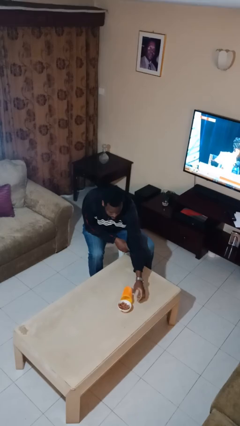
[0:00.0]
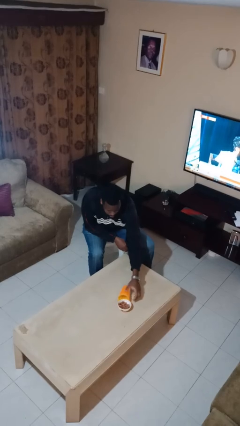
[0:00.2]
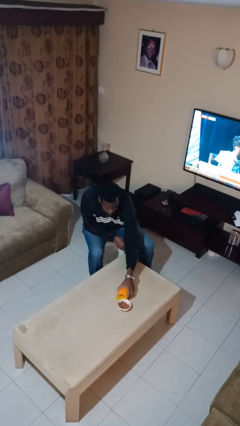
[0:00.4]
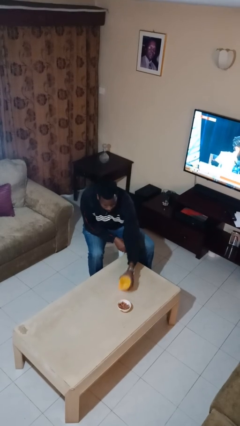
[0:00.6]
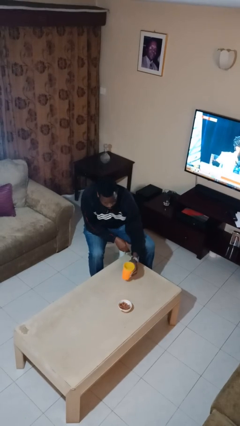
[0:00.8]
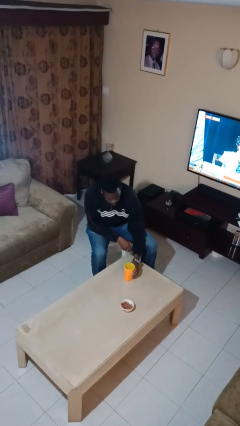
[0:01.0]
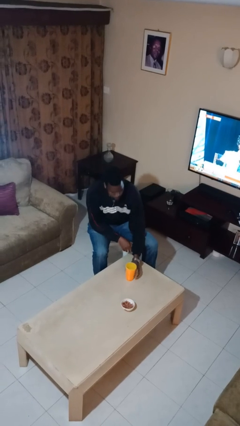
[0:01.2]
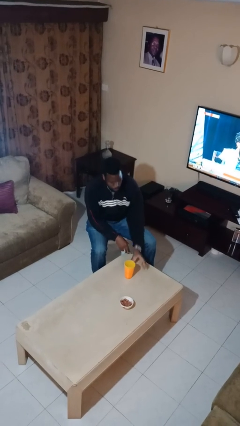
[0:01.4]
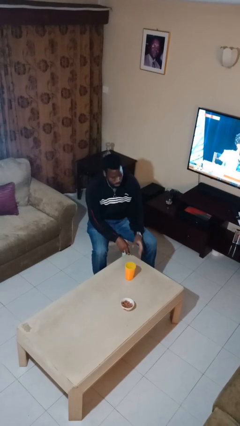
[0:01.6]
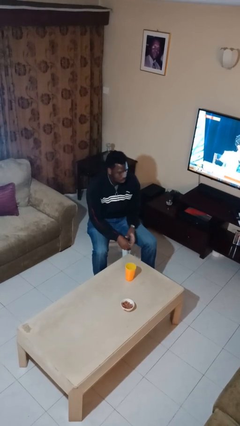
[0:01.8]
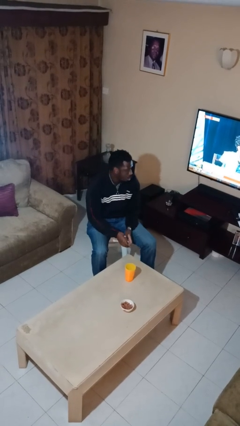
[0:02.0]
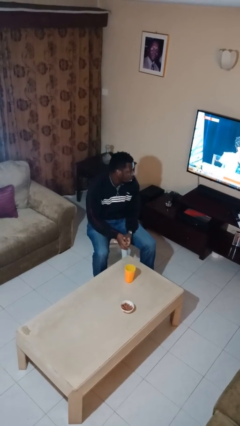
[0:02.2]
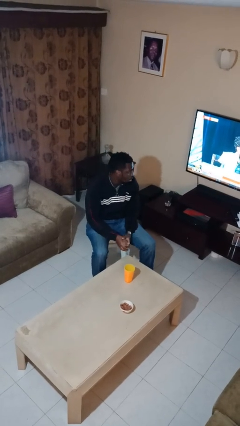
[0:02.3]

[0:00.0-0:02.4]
person sets upright glass

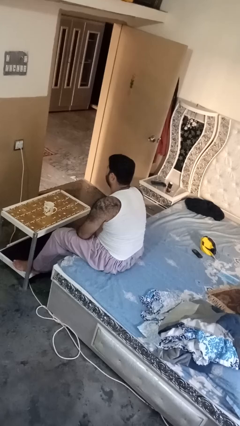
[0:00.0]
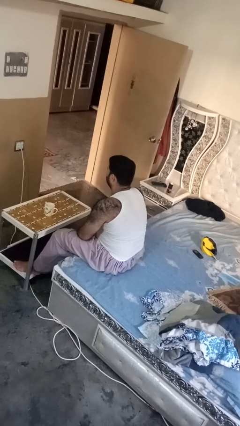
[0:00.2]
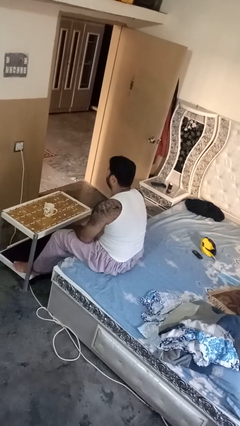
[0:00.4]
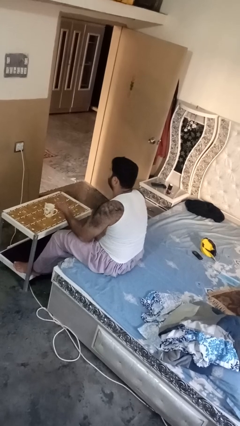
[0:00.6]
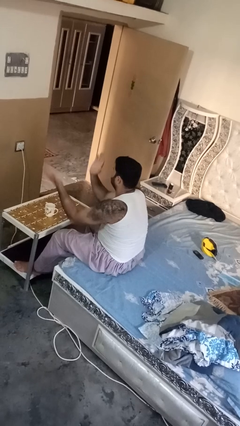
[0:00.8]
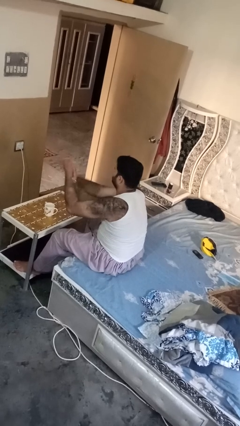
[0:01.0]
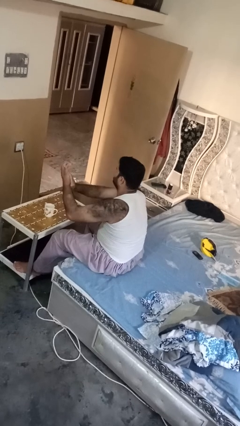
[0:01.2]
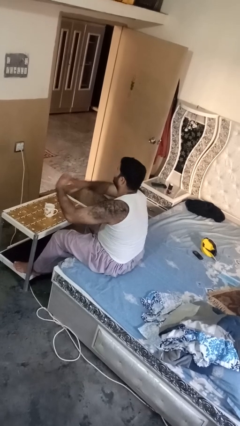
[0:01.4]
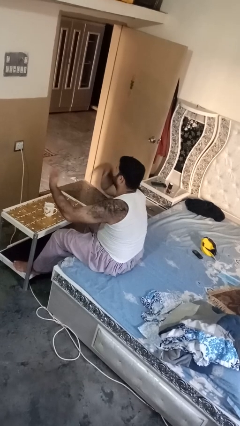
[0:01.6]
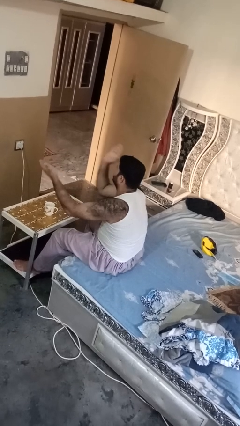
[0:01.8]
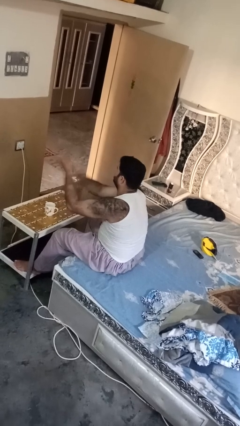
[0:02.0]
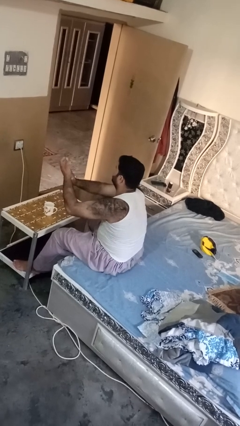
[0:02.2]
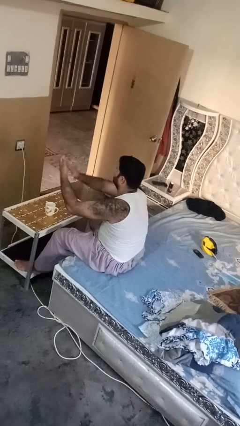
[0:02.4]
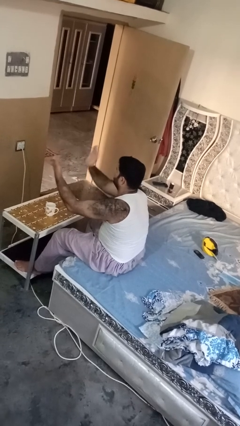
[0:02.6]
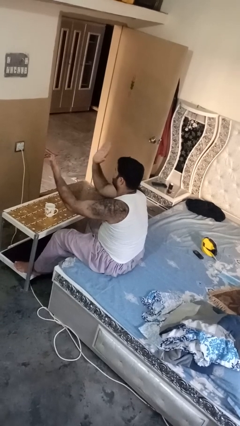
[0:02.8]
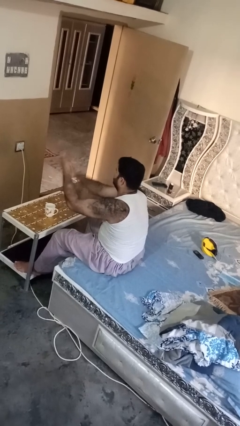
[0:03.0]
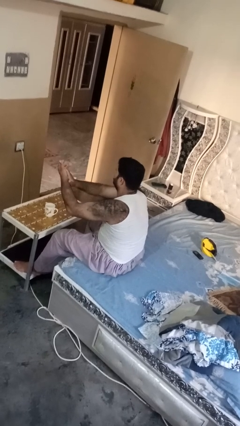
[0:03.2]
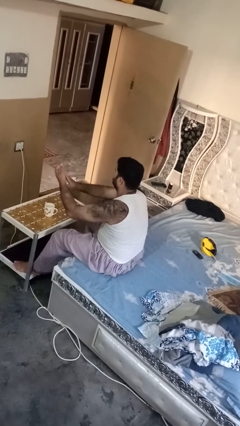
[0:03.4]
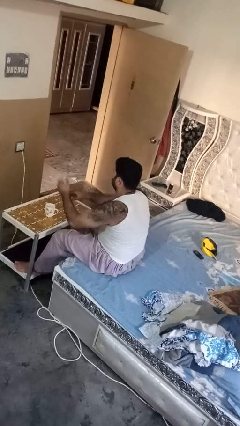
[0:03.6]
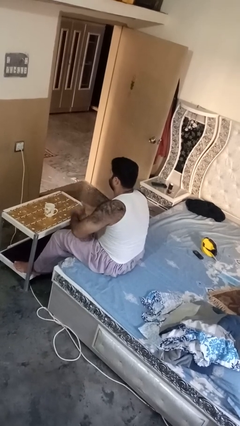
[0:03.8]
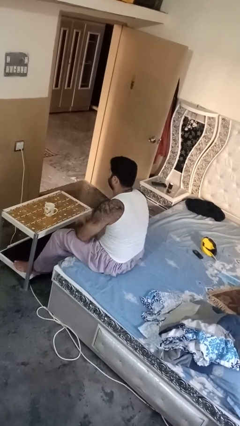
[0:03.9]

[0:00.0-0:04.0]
person claps hands

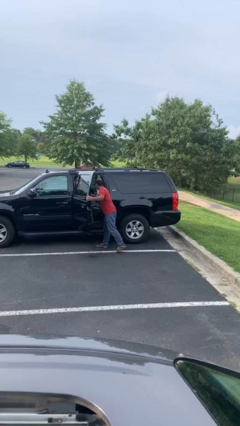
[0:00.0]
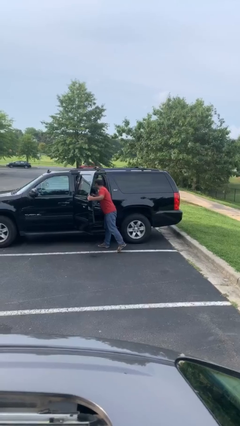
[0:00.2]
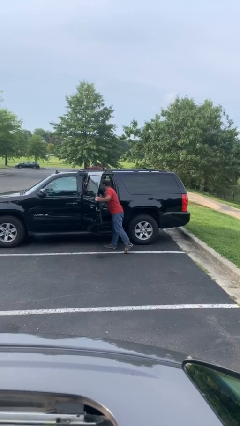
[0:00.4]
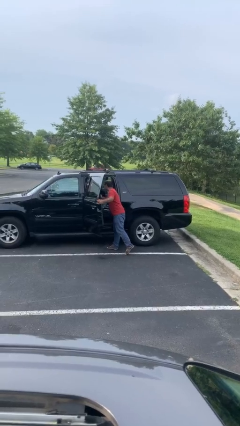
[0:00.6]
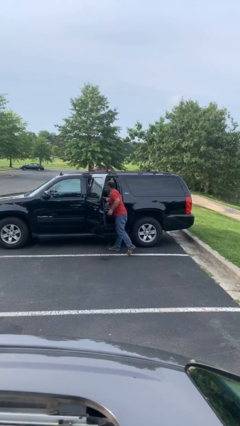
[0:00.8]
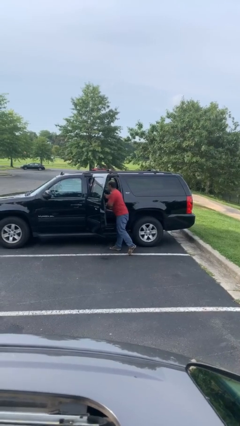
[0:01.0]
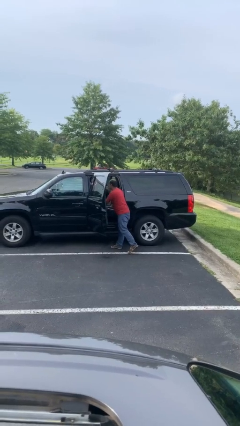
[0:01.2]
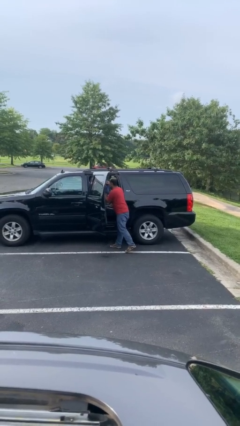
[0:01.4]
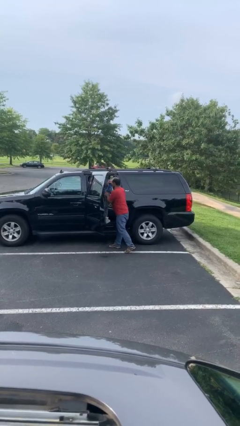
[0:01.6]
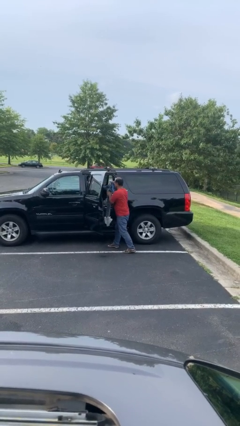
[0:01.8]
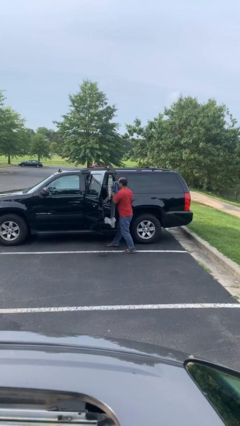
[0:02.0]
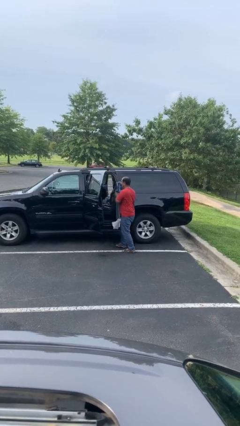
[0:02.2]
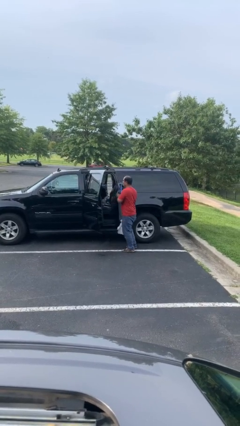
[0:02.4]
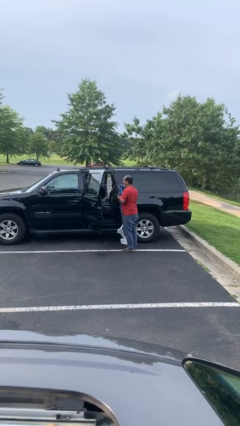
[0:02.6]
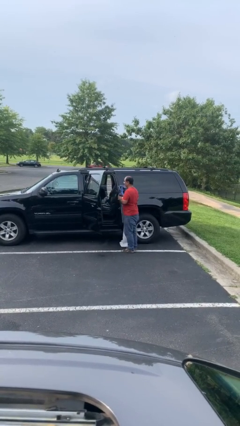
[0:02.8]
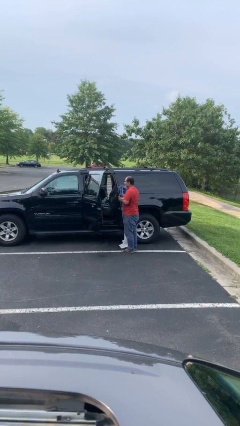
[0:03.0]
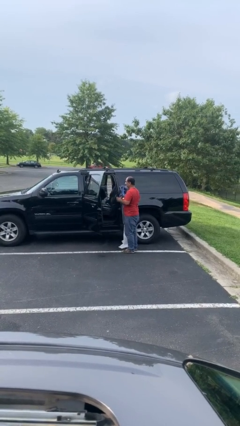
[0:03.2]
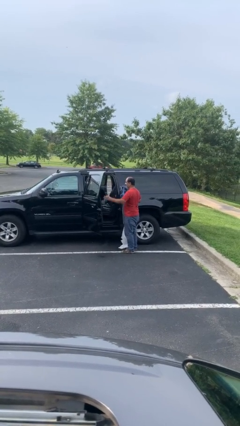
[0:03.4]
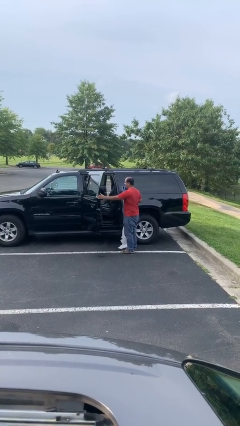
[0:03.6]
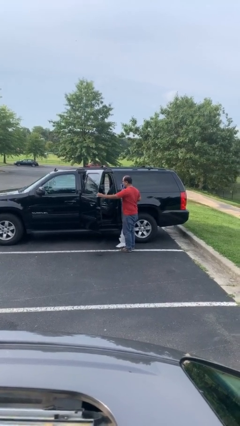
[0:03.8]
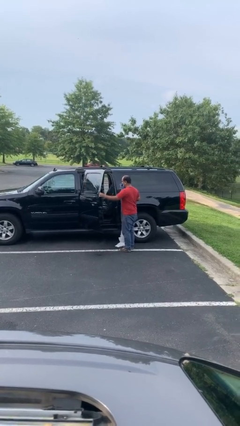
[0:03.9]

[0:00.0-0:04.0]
person unloads car

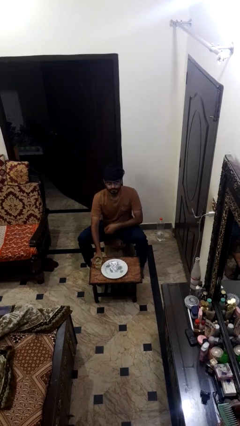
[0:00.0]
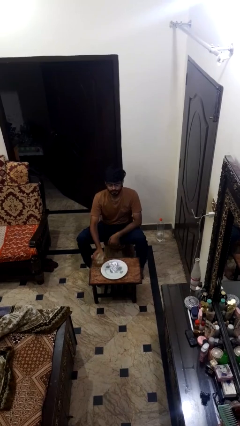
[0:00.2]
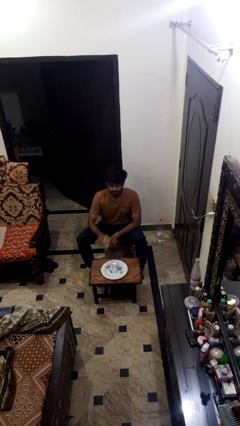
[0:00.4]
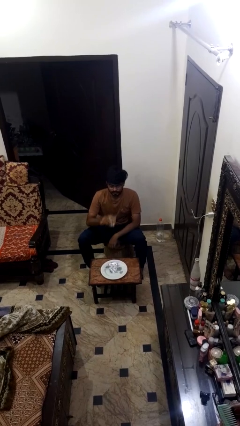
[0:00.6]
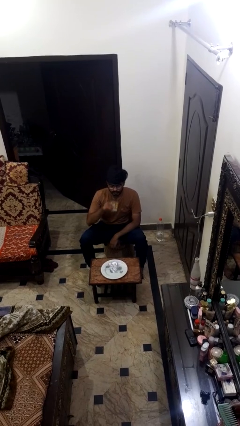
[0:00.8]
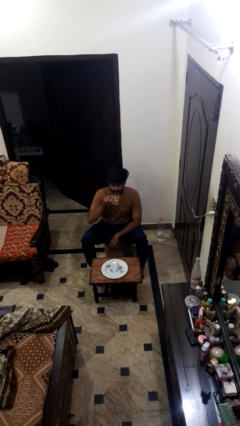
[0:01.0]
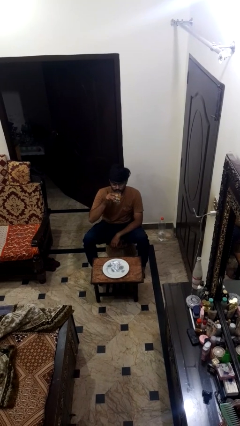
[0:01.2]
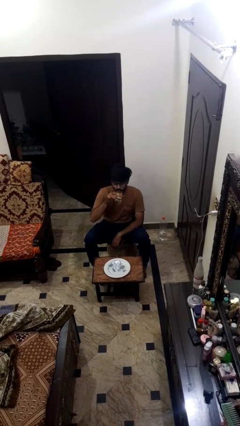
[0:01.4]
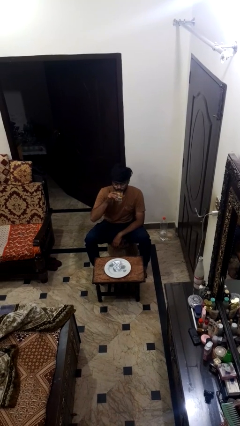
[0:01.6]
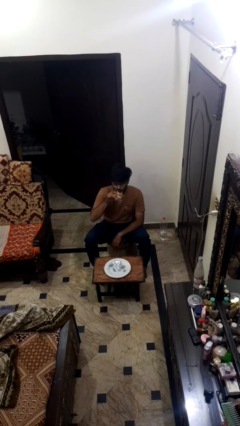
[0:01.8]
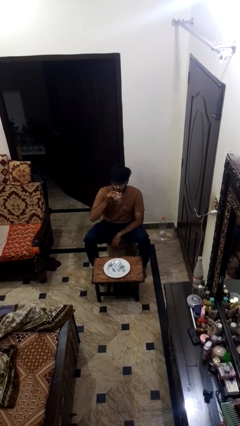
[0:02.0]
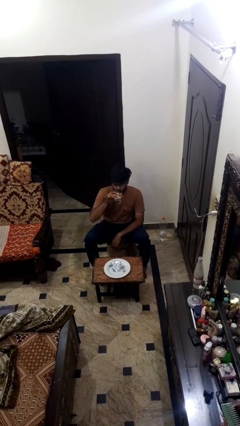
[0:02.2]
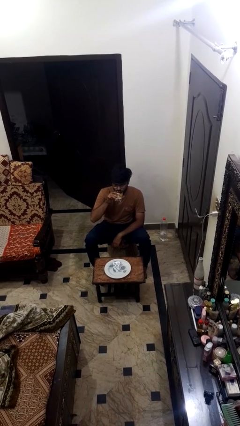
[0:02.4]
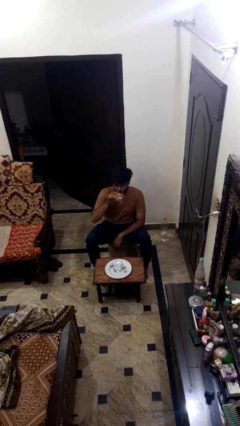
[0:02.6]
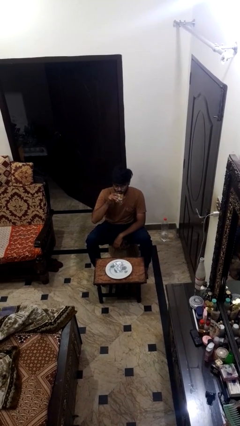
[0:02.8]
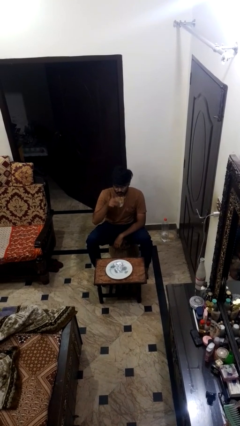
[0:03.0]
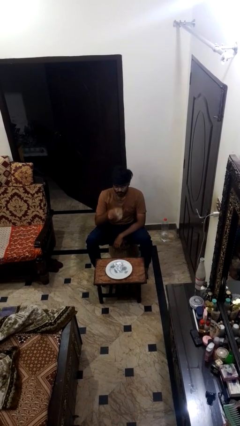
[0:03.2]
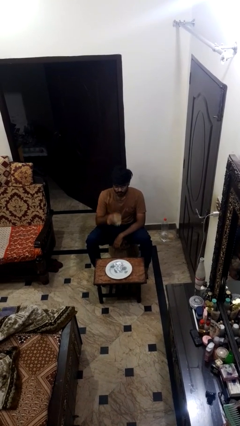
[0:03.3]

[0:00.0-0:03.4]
person drinks from cup

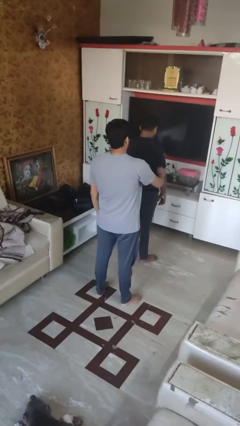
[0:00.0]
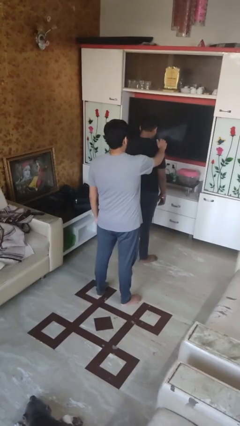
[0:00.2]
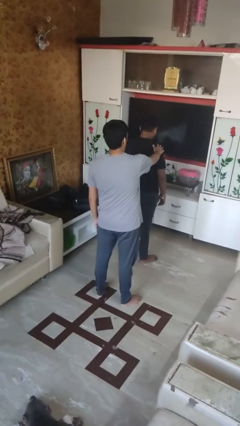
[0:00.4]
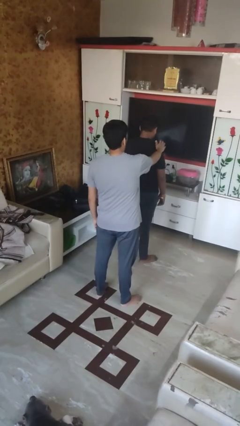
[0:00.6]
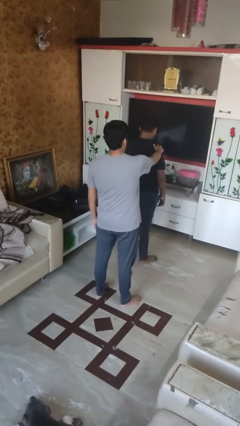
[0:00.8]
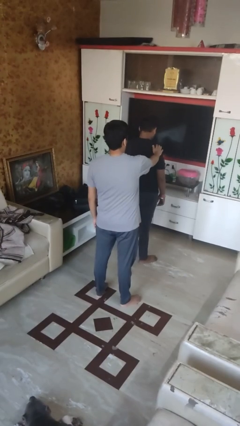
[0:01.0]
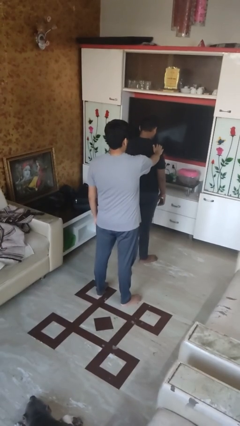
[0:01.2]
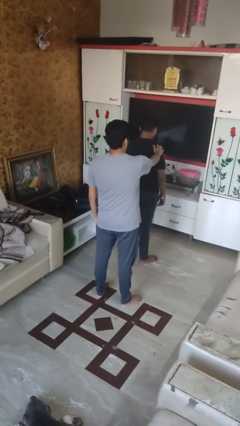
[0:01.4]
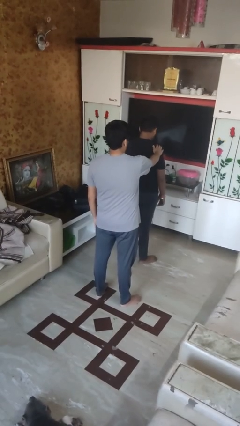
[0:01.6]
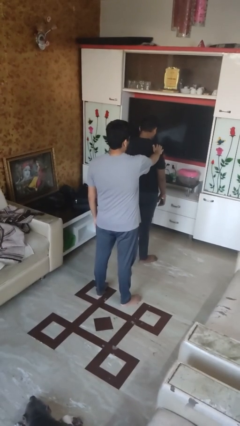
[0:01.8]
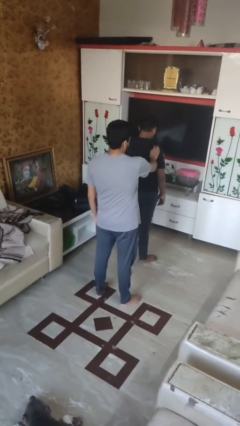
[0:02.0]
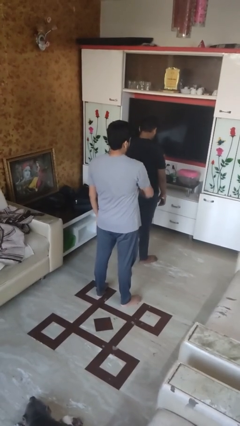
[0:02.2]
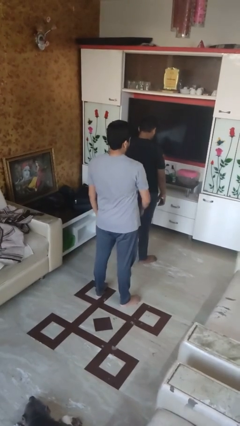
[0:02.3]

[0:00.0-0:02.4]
person pounds shoulders of person

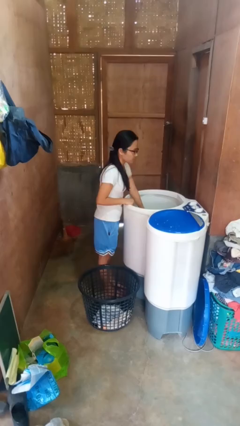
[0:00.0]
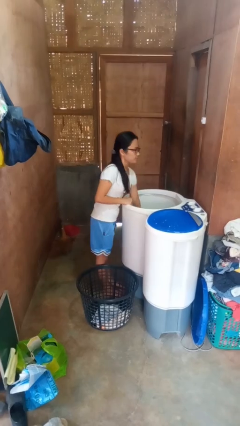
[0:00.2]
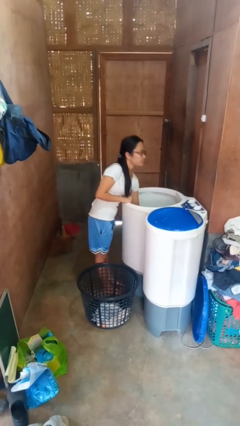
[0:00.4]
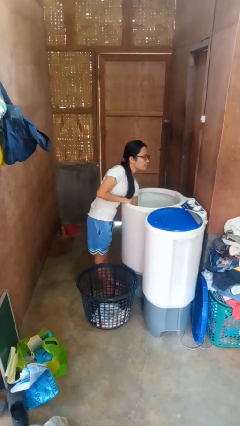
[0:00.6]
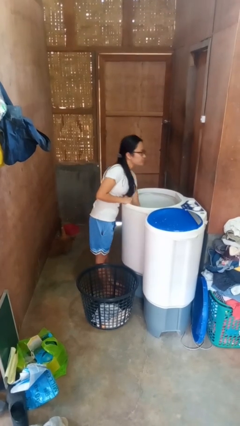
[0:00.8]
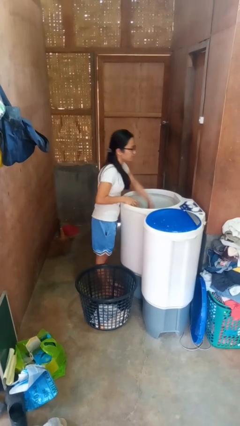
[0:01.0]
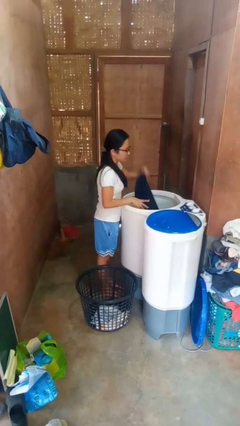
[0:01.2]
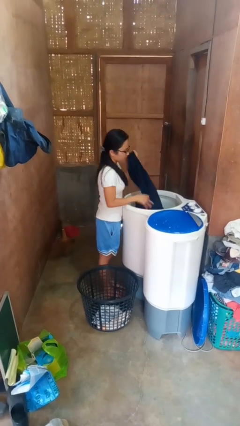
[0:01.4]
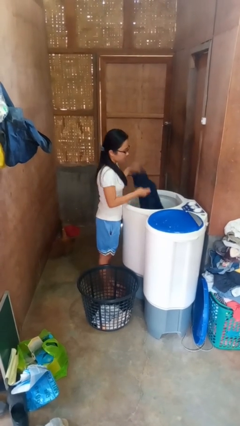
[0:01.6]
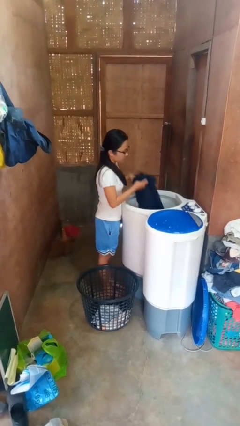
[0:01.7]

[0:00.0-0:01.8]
person unloads clotheswasher
